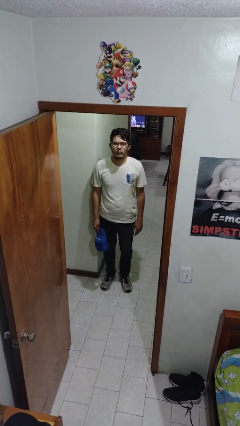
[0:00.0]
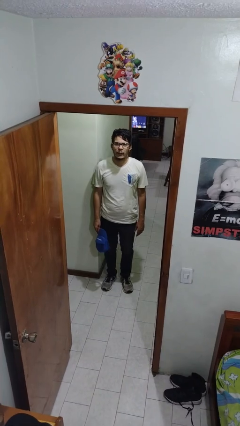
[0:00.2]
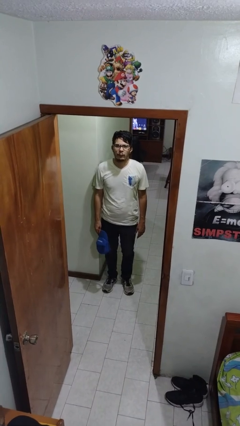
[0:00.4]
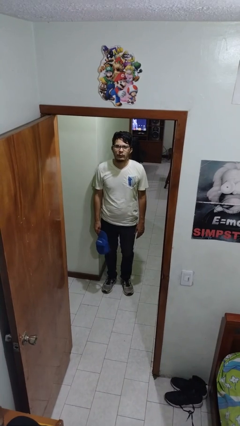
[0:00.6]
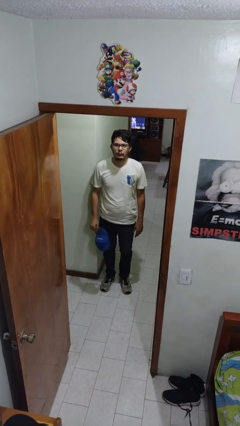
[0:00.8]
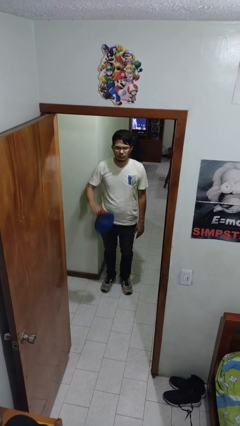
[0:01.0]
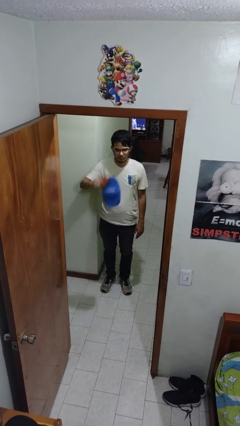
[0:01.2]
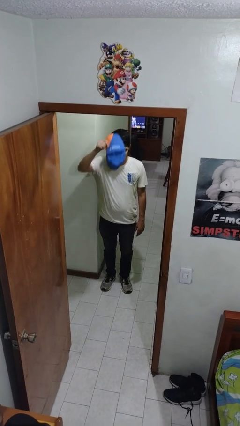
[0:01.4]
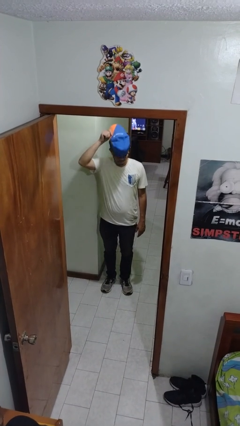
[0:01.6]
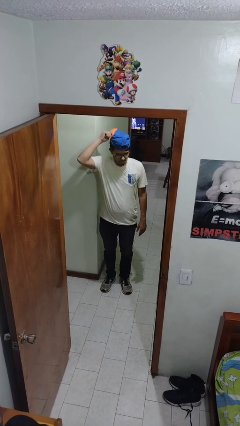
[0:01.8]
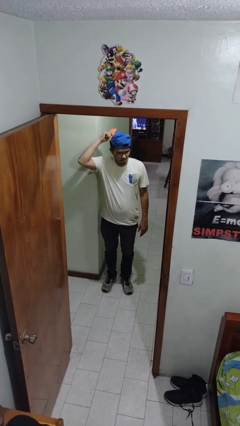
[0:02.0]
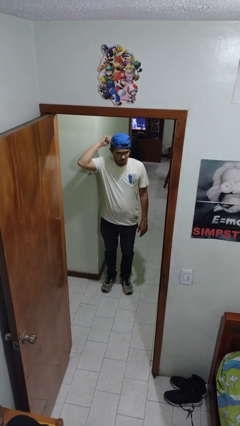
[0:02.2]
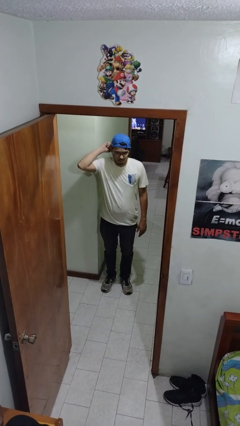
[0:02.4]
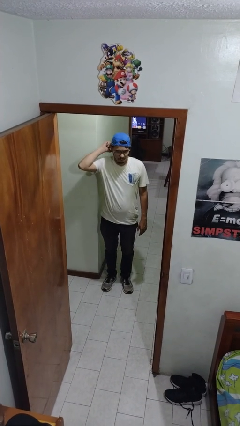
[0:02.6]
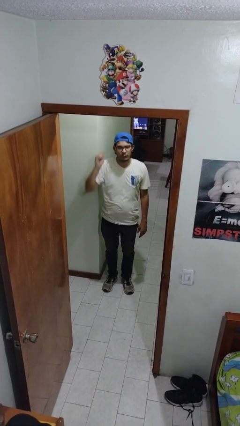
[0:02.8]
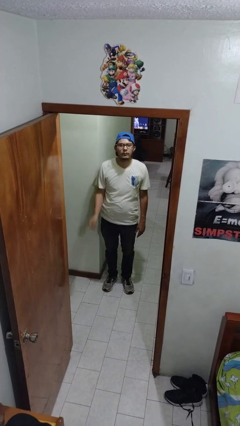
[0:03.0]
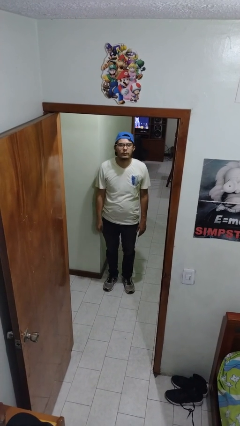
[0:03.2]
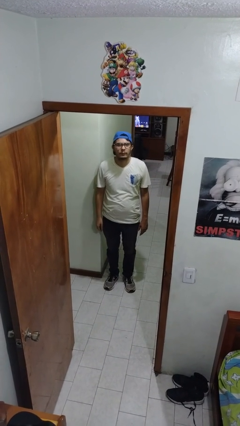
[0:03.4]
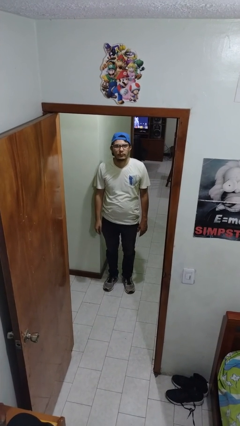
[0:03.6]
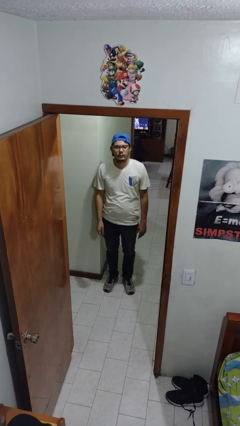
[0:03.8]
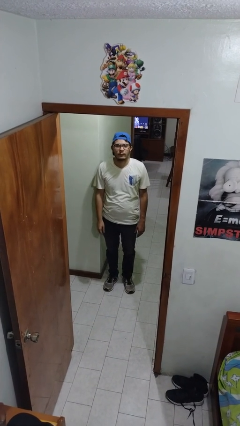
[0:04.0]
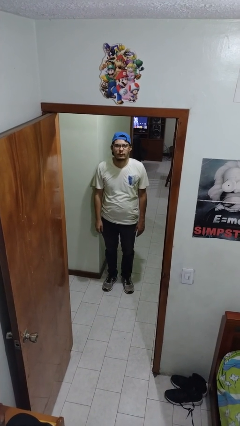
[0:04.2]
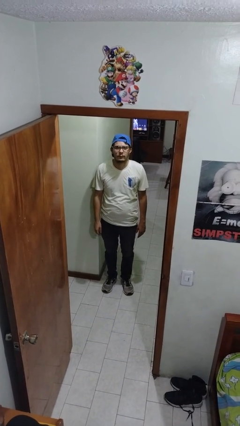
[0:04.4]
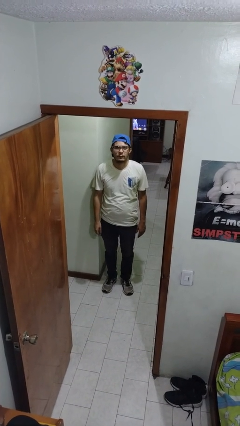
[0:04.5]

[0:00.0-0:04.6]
person puts on hat

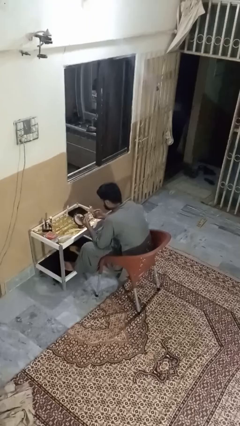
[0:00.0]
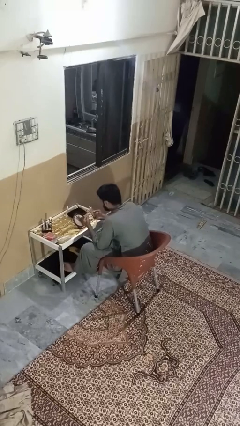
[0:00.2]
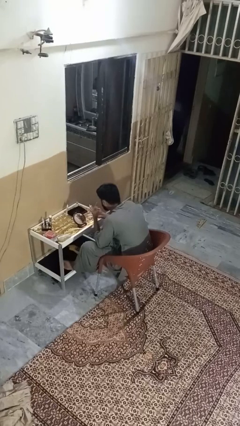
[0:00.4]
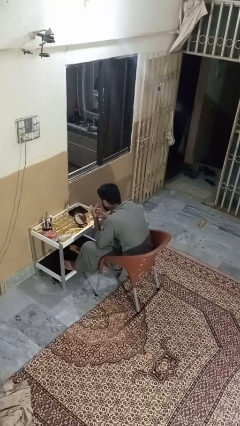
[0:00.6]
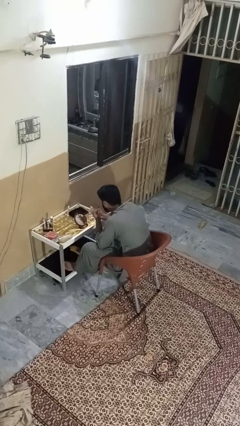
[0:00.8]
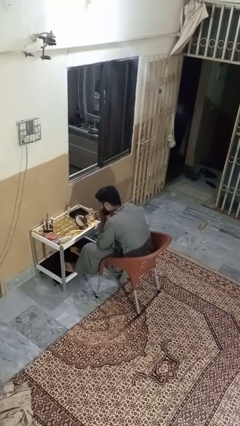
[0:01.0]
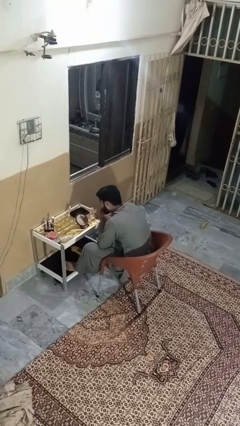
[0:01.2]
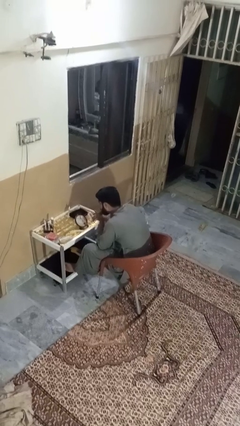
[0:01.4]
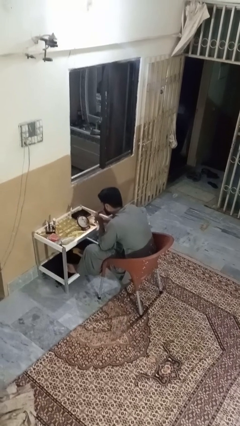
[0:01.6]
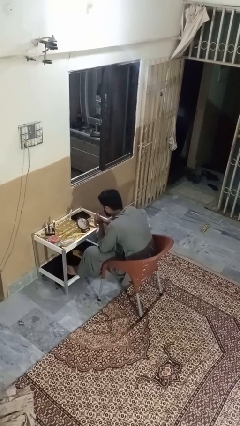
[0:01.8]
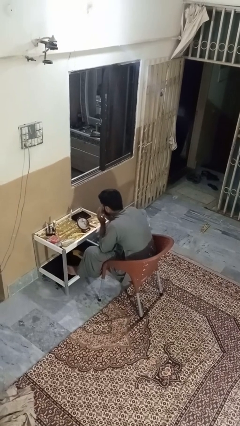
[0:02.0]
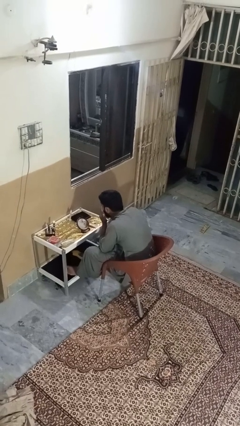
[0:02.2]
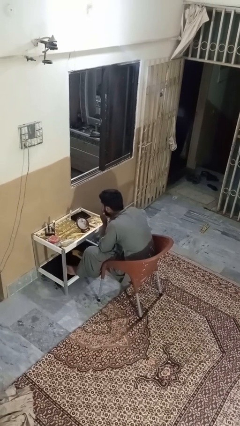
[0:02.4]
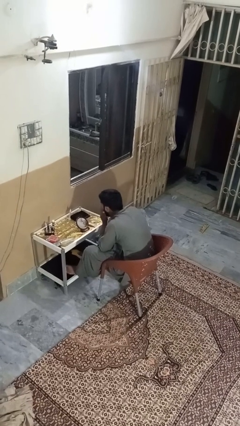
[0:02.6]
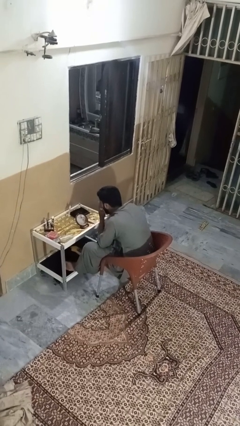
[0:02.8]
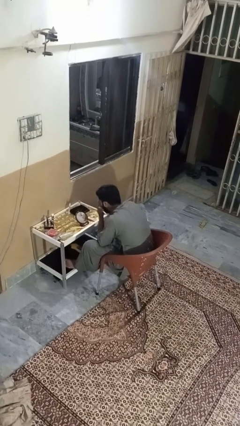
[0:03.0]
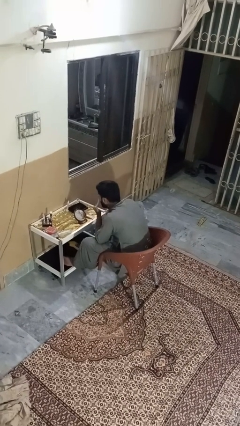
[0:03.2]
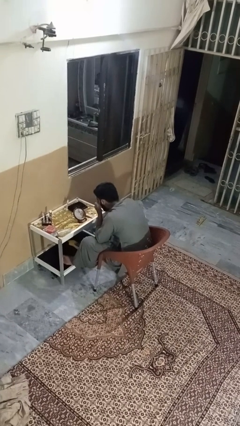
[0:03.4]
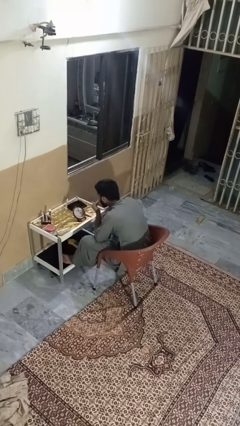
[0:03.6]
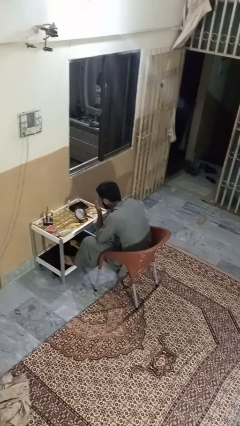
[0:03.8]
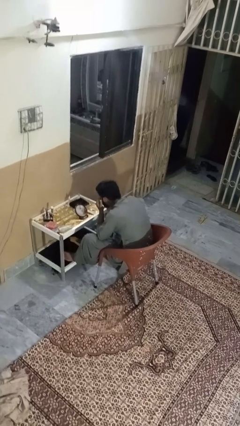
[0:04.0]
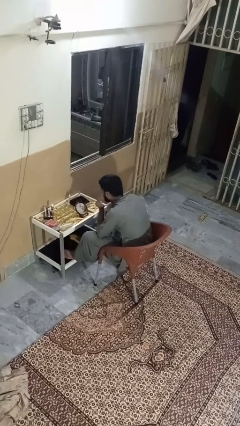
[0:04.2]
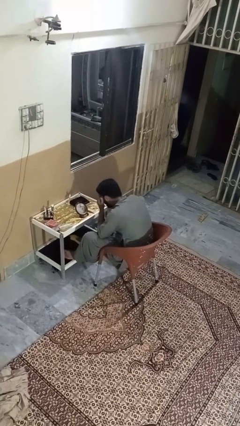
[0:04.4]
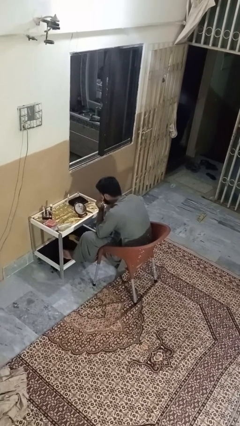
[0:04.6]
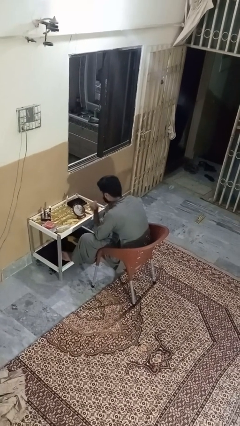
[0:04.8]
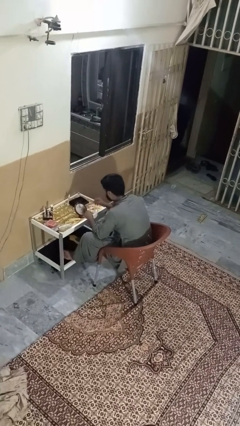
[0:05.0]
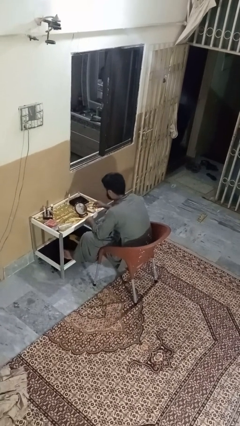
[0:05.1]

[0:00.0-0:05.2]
person applies foundation makeup

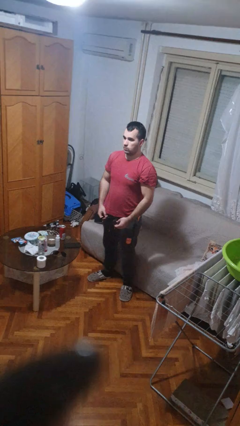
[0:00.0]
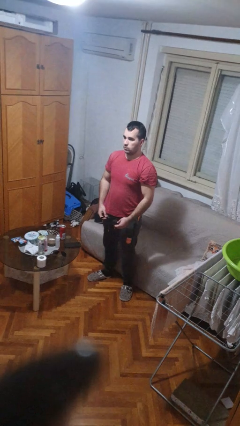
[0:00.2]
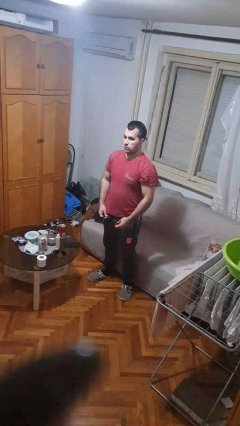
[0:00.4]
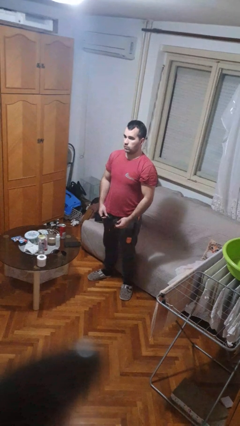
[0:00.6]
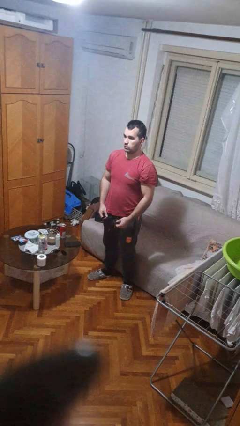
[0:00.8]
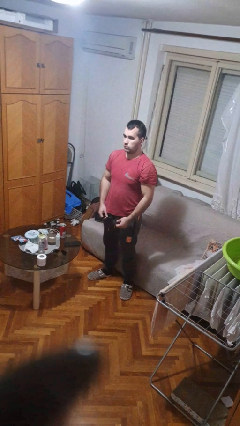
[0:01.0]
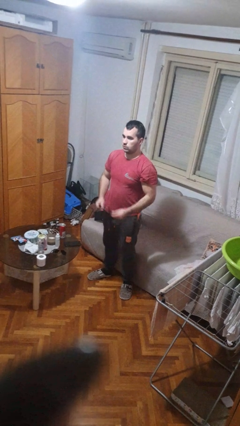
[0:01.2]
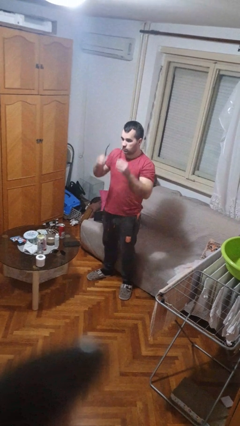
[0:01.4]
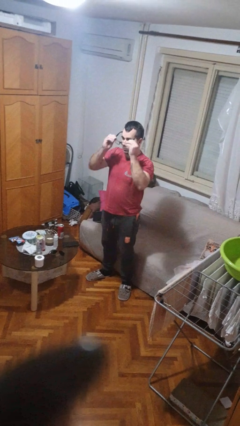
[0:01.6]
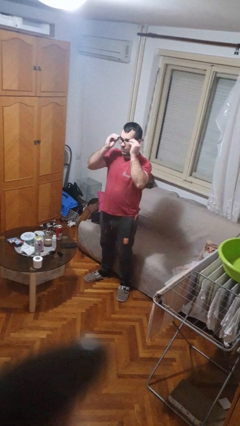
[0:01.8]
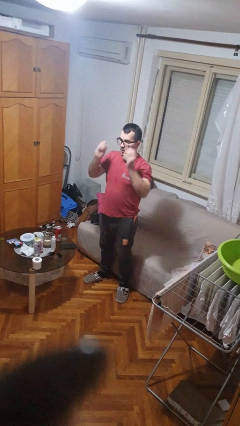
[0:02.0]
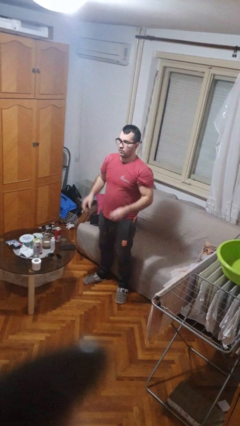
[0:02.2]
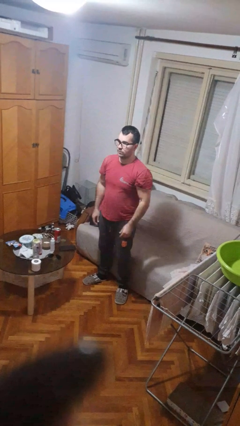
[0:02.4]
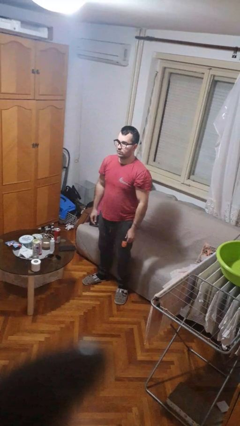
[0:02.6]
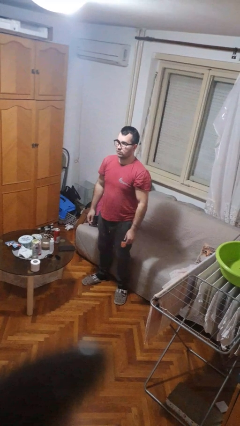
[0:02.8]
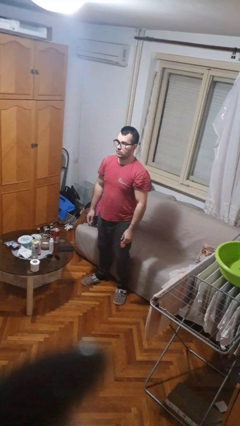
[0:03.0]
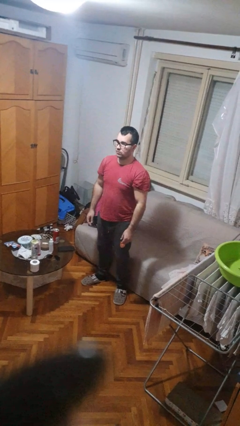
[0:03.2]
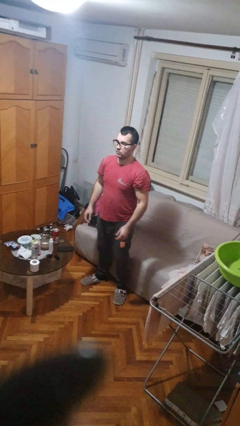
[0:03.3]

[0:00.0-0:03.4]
person puts on glasses

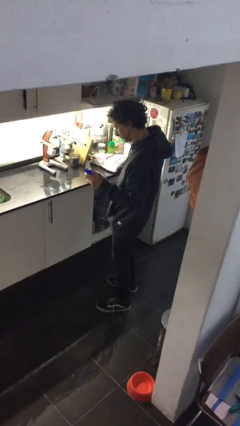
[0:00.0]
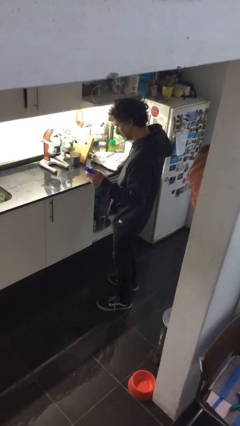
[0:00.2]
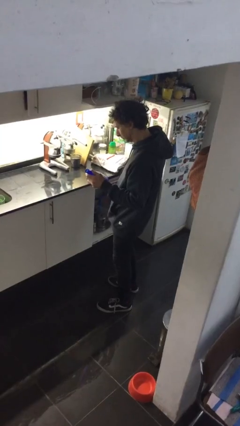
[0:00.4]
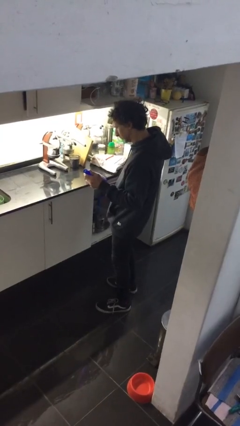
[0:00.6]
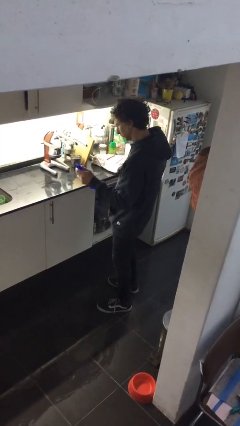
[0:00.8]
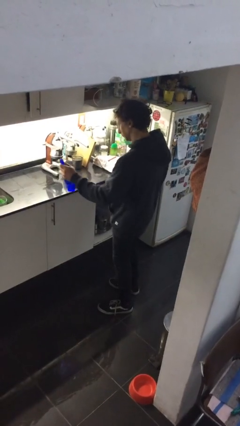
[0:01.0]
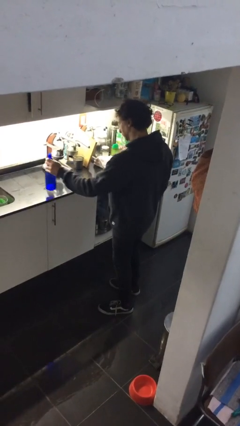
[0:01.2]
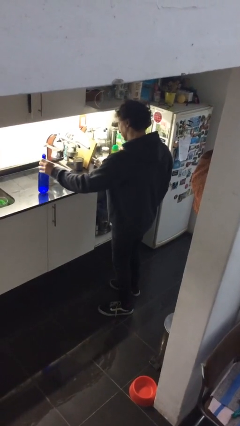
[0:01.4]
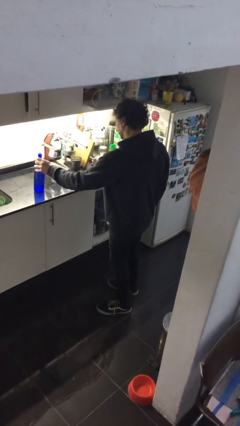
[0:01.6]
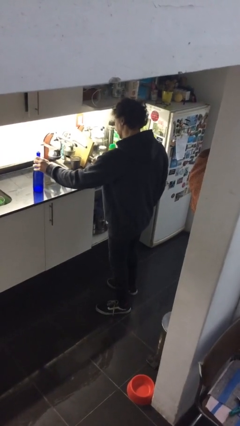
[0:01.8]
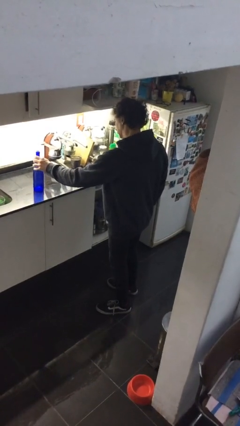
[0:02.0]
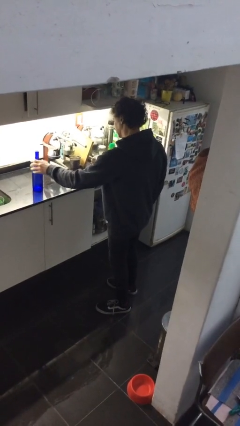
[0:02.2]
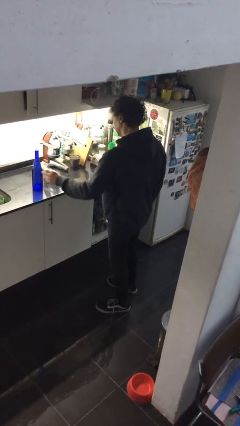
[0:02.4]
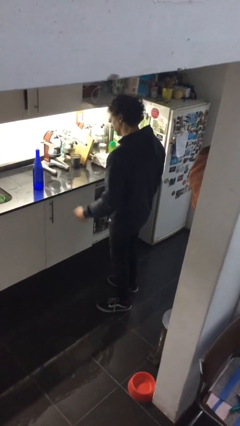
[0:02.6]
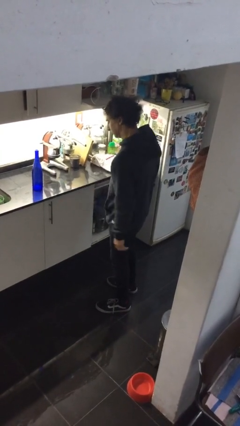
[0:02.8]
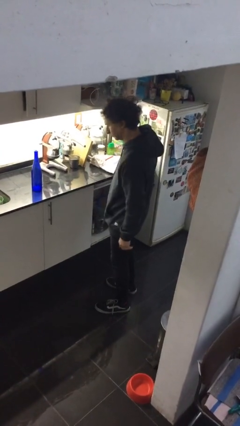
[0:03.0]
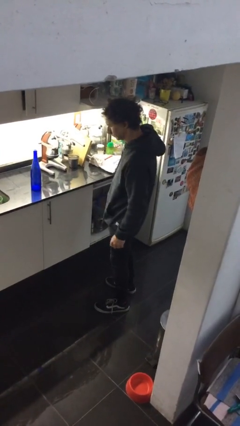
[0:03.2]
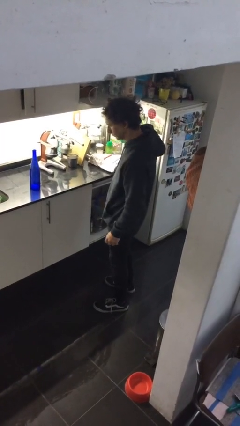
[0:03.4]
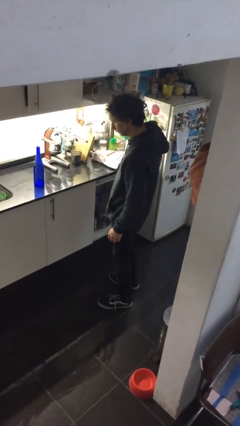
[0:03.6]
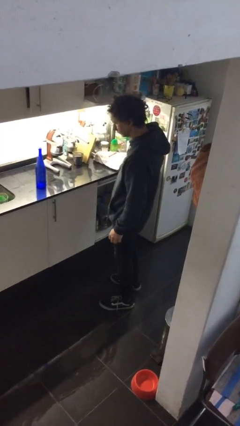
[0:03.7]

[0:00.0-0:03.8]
person puts down object on countertop

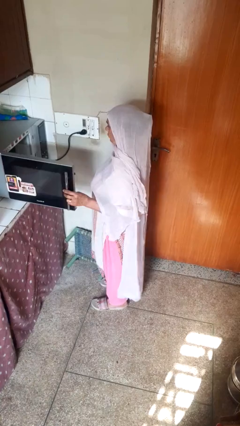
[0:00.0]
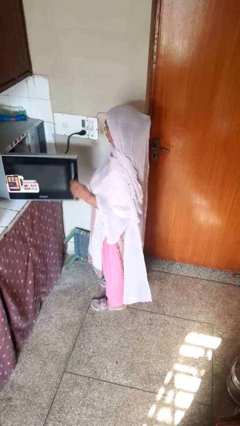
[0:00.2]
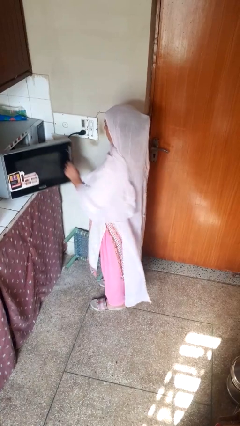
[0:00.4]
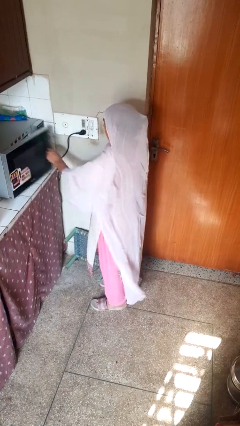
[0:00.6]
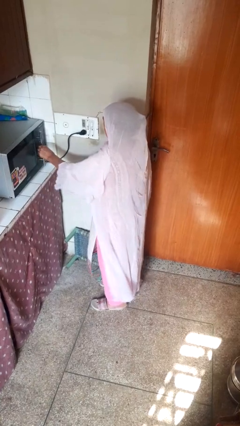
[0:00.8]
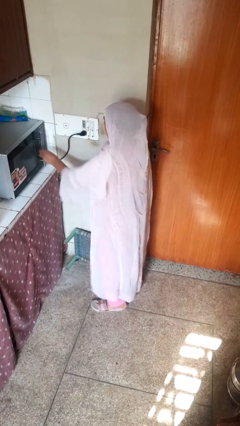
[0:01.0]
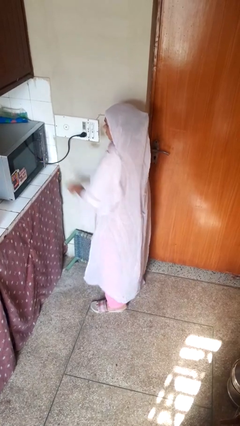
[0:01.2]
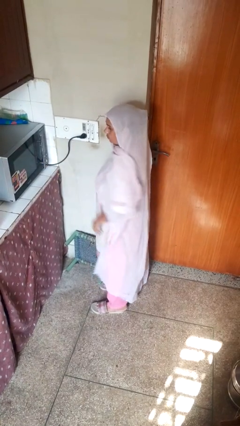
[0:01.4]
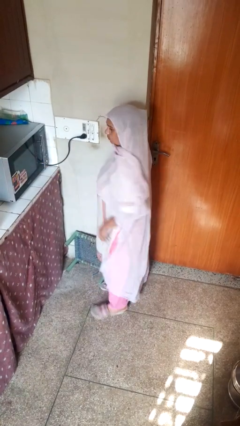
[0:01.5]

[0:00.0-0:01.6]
person closes oven door
